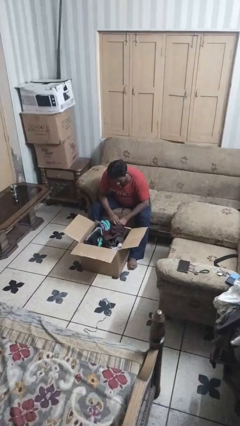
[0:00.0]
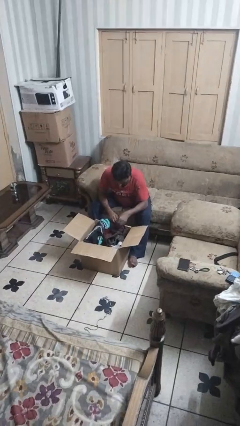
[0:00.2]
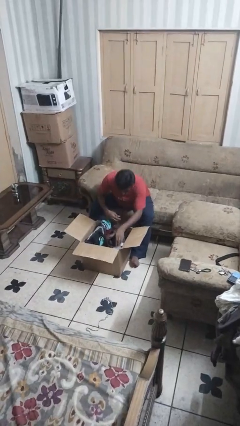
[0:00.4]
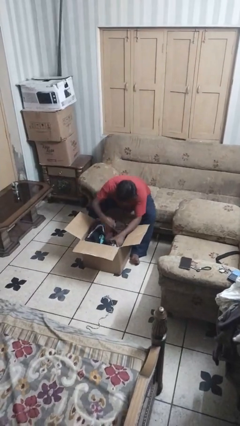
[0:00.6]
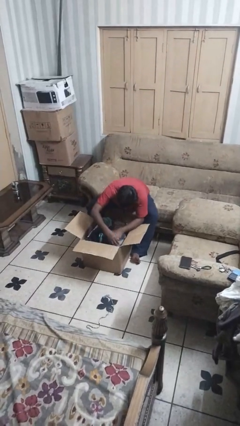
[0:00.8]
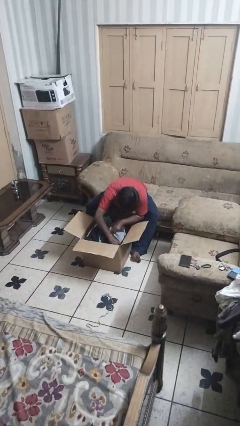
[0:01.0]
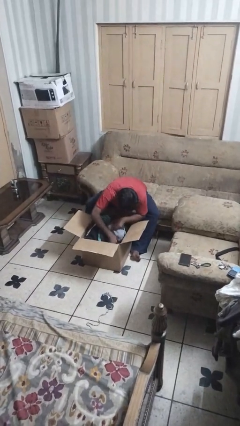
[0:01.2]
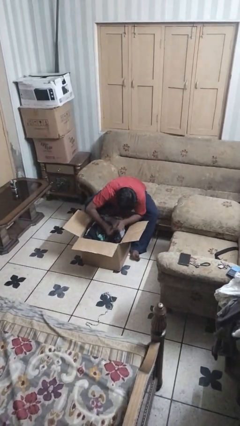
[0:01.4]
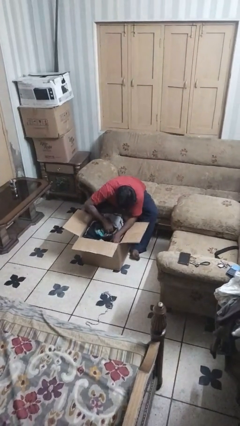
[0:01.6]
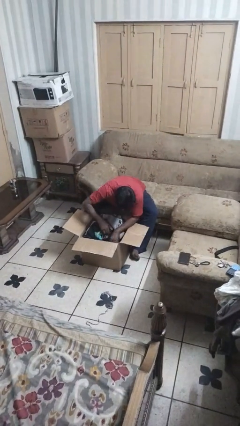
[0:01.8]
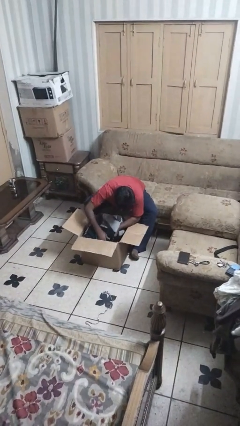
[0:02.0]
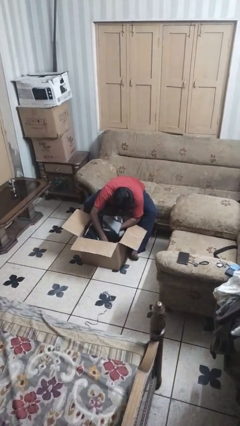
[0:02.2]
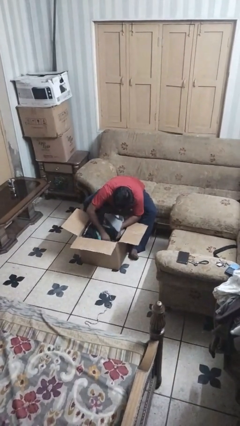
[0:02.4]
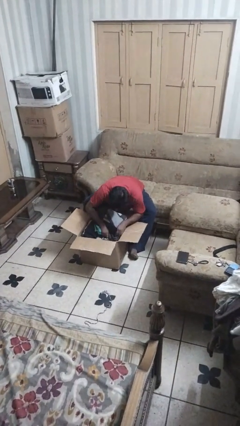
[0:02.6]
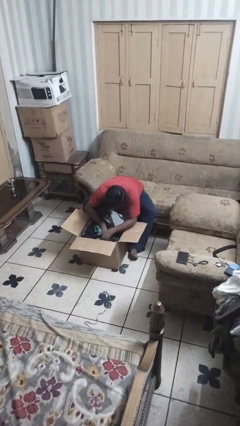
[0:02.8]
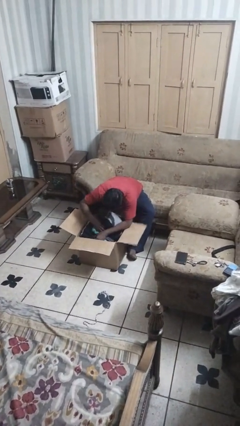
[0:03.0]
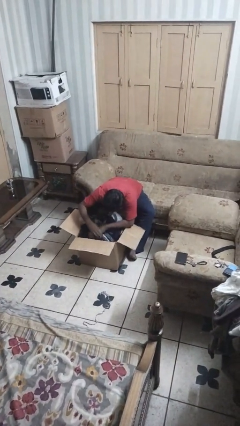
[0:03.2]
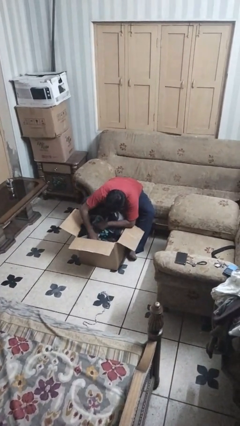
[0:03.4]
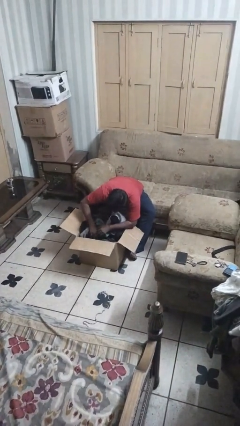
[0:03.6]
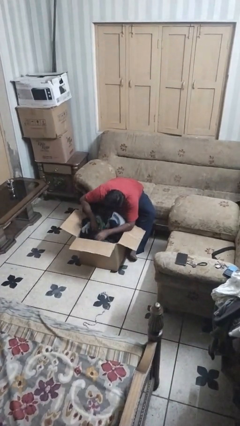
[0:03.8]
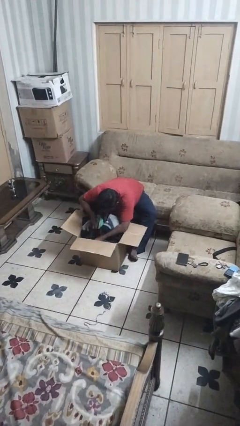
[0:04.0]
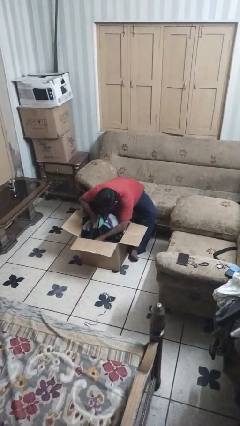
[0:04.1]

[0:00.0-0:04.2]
person searches in box

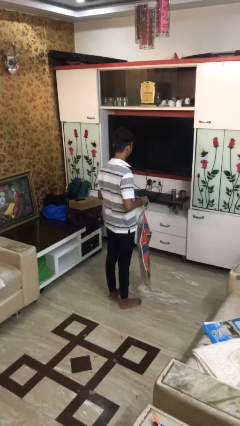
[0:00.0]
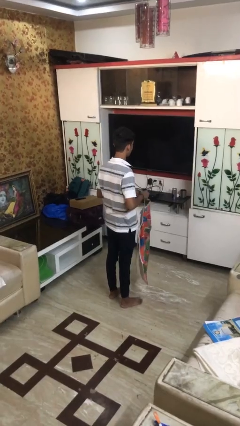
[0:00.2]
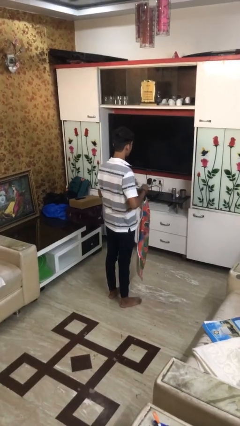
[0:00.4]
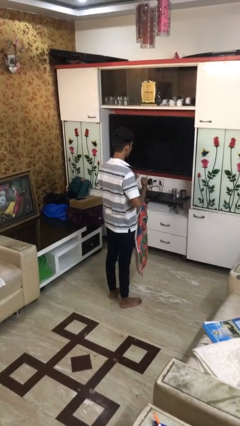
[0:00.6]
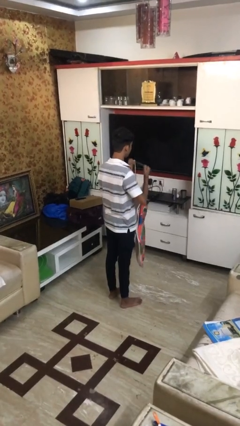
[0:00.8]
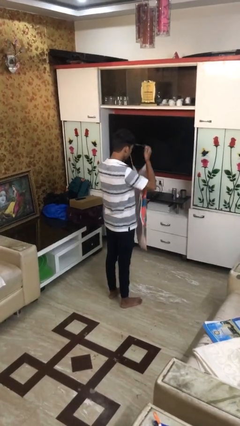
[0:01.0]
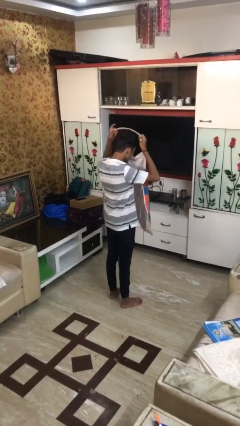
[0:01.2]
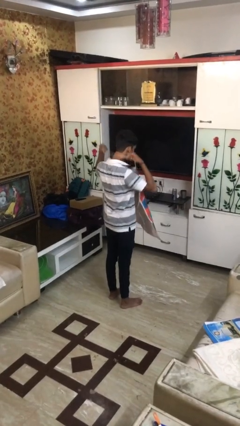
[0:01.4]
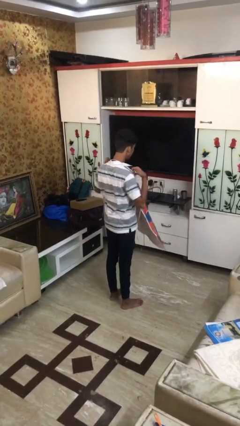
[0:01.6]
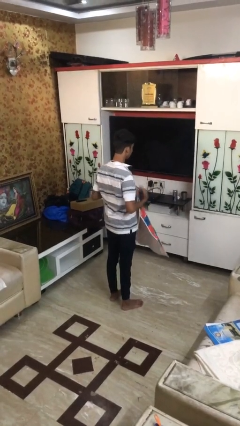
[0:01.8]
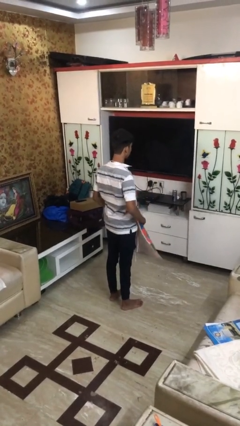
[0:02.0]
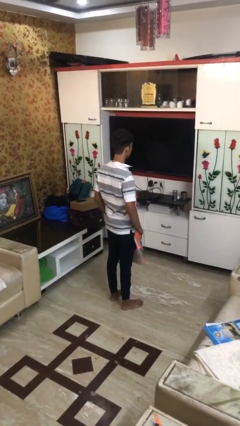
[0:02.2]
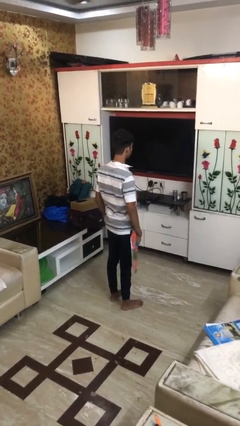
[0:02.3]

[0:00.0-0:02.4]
person puts on apron

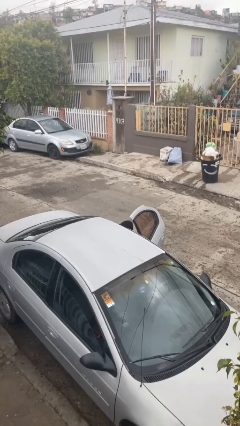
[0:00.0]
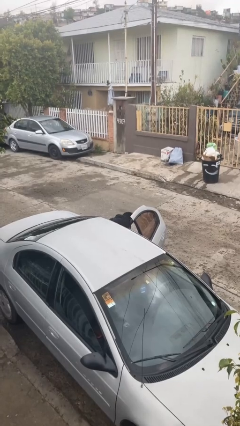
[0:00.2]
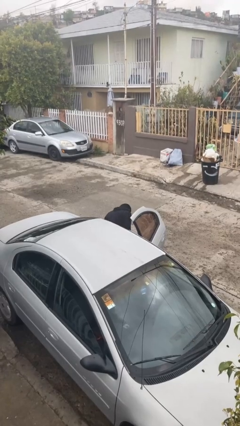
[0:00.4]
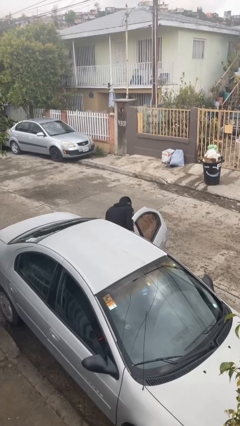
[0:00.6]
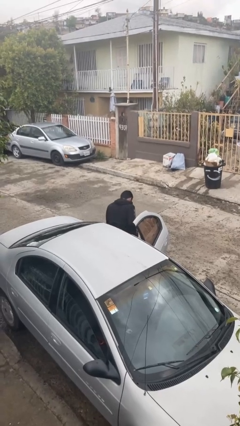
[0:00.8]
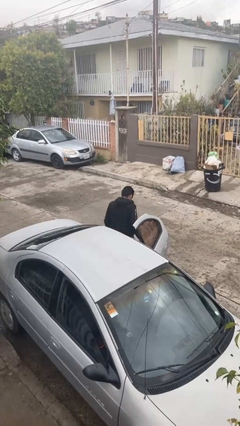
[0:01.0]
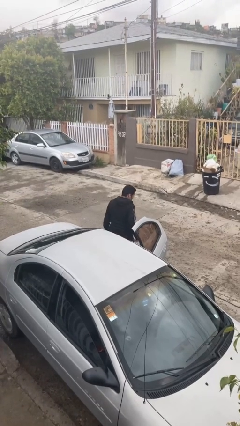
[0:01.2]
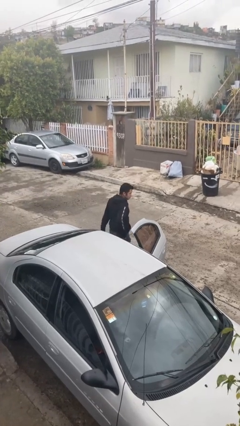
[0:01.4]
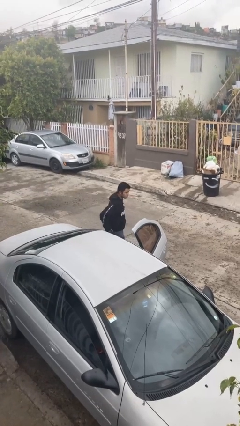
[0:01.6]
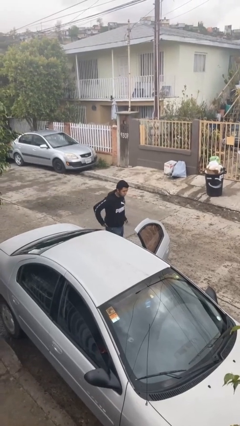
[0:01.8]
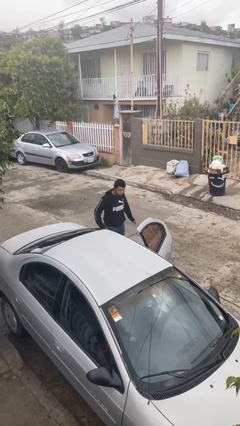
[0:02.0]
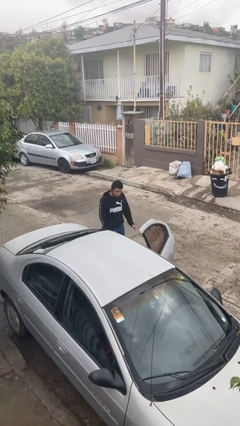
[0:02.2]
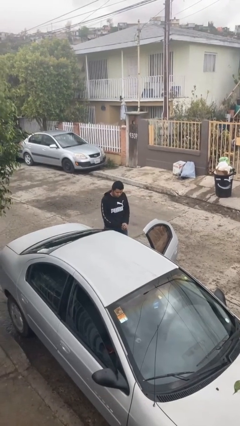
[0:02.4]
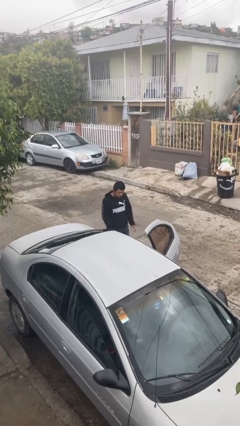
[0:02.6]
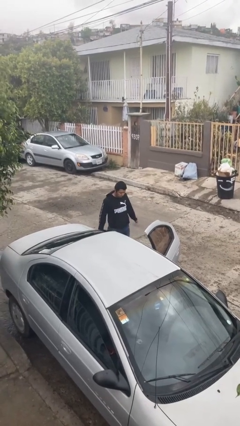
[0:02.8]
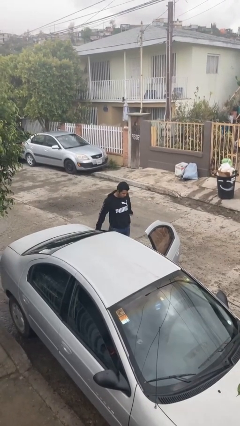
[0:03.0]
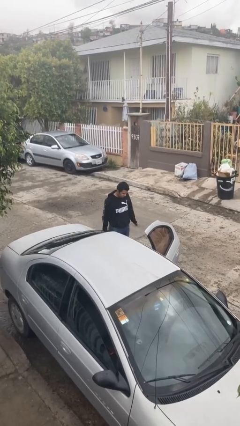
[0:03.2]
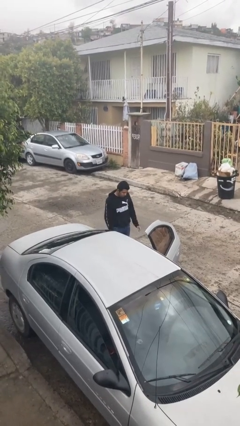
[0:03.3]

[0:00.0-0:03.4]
person exits car

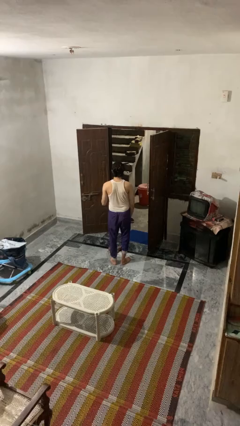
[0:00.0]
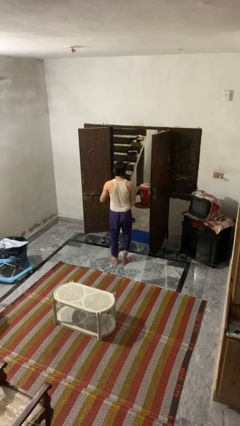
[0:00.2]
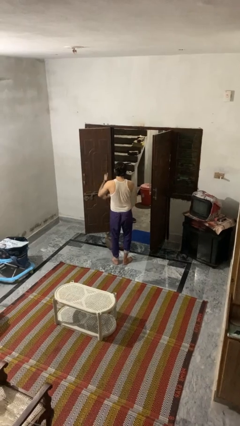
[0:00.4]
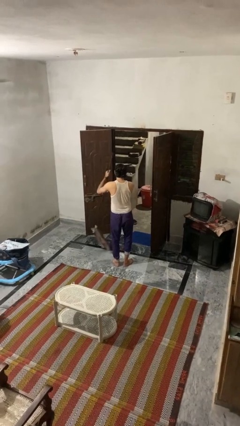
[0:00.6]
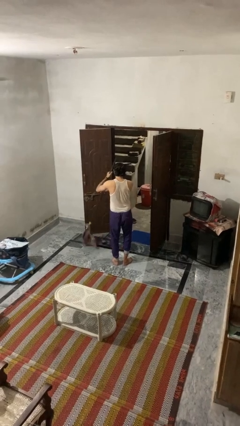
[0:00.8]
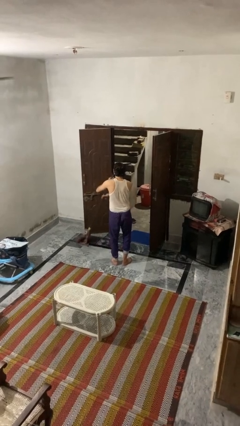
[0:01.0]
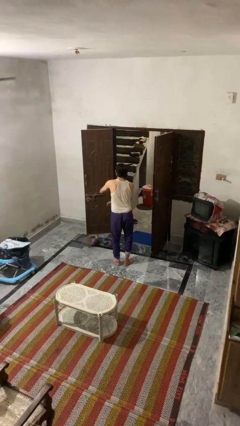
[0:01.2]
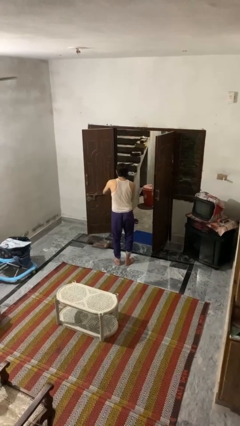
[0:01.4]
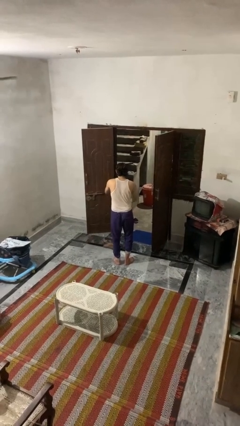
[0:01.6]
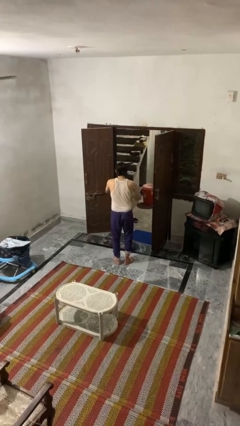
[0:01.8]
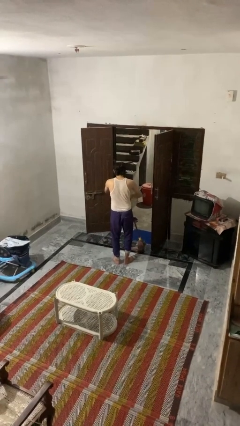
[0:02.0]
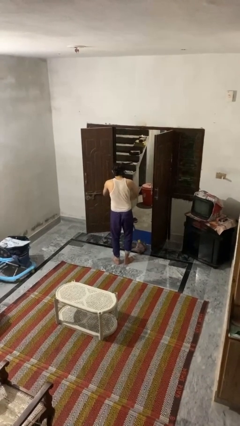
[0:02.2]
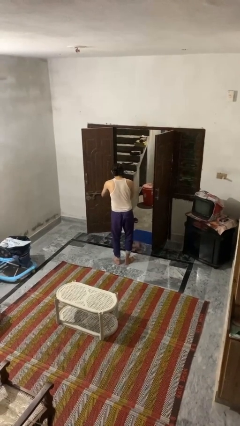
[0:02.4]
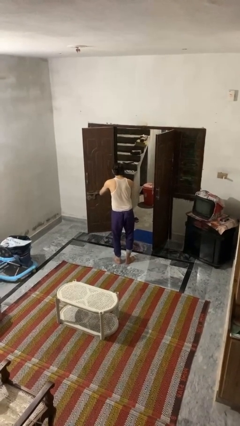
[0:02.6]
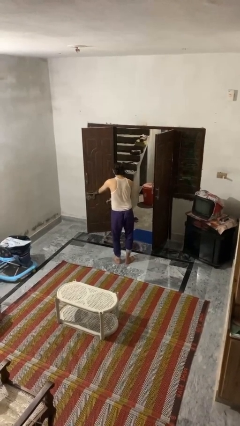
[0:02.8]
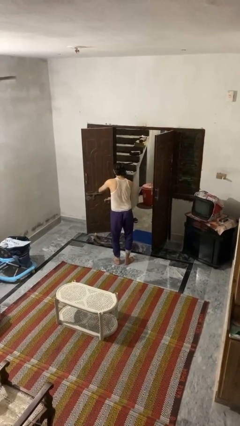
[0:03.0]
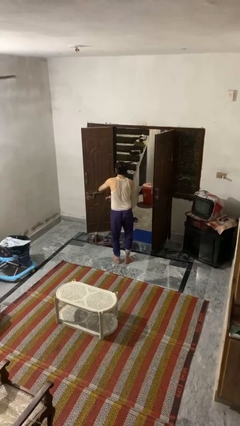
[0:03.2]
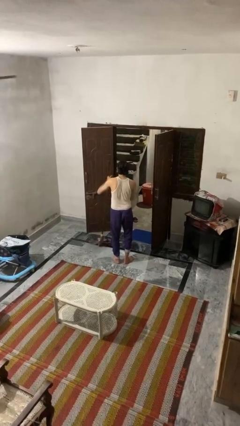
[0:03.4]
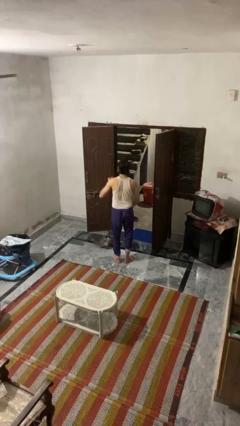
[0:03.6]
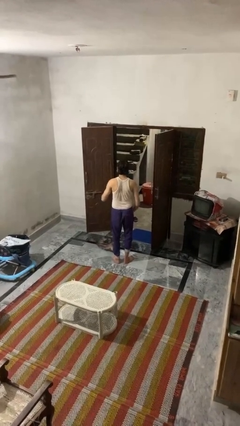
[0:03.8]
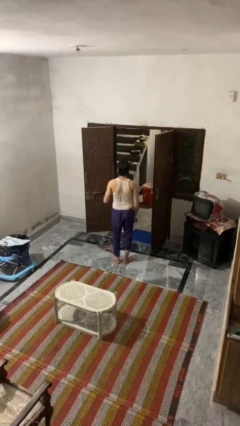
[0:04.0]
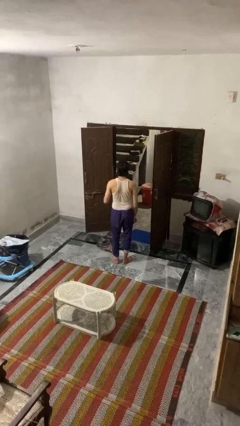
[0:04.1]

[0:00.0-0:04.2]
person mops

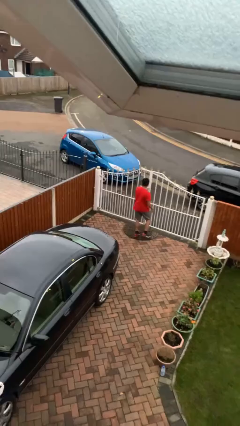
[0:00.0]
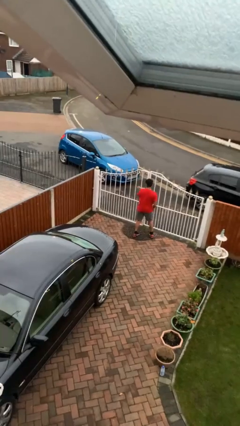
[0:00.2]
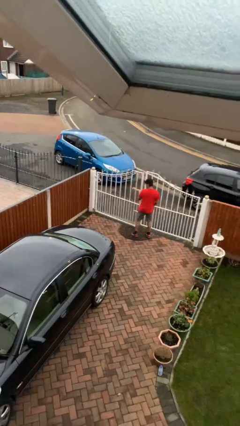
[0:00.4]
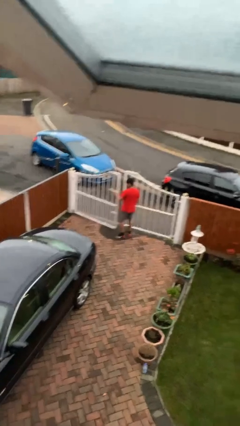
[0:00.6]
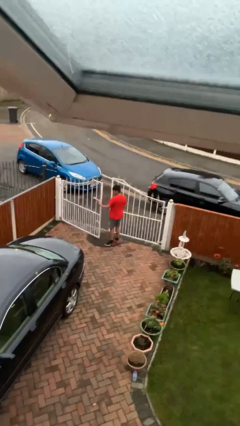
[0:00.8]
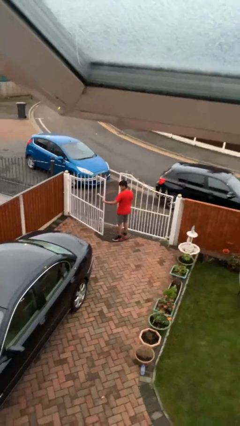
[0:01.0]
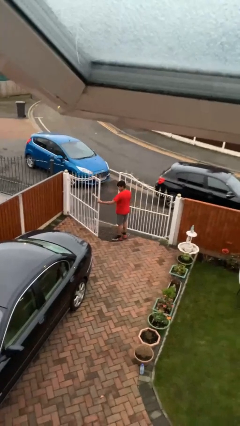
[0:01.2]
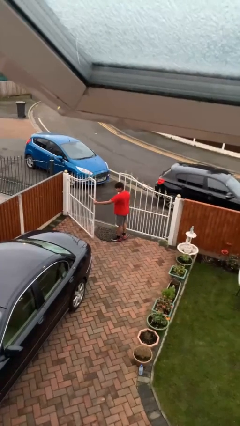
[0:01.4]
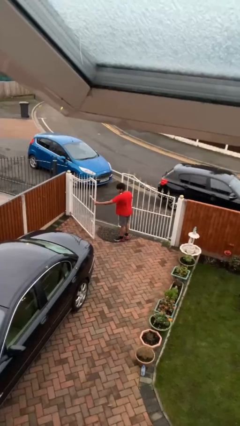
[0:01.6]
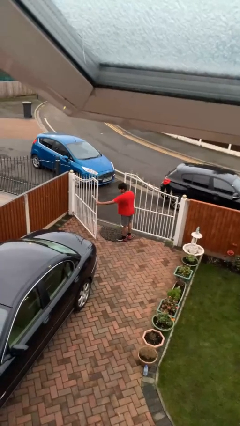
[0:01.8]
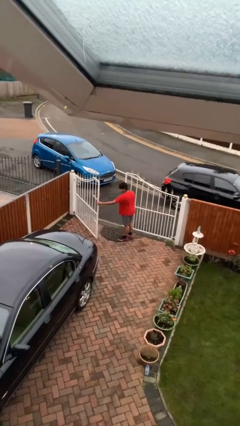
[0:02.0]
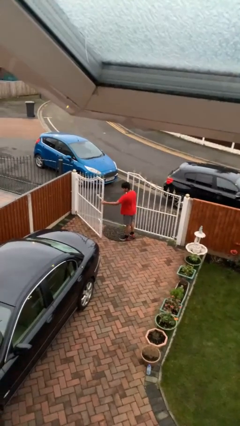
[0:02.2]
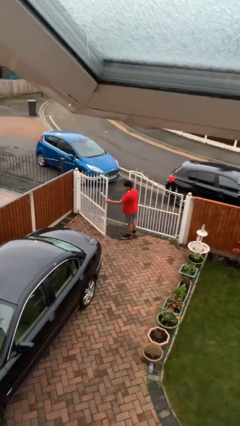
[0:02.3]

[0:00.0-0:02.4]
person opens facility door

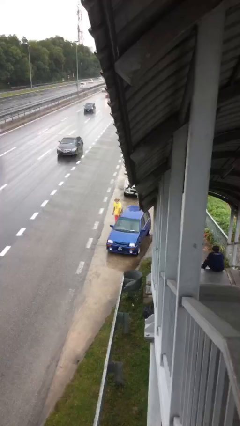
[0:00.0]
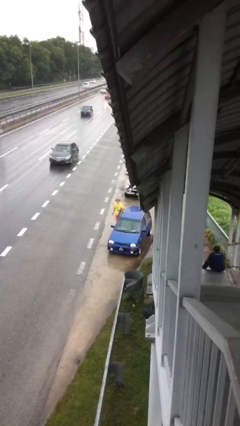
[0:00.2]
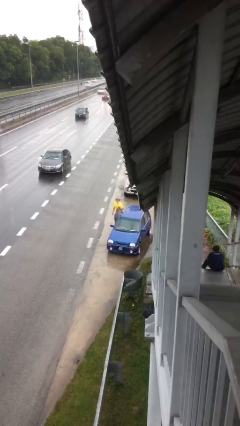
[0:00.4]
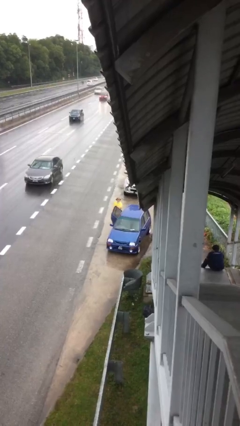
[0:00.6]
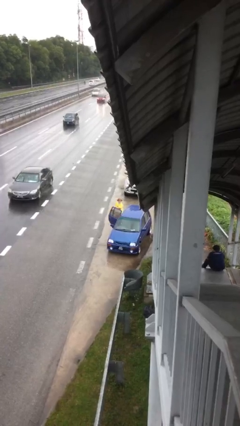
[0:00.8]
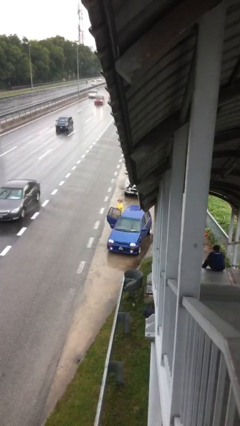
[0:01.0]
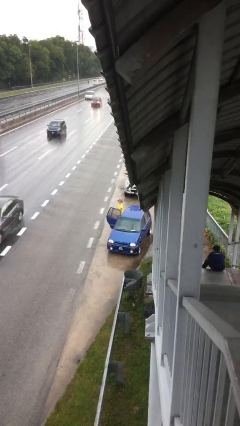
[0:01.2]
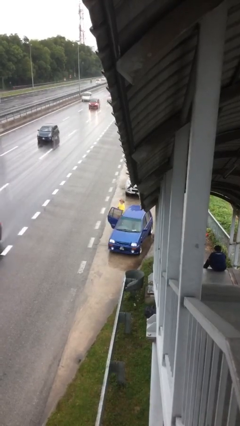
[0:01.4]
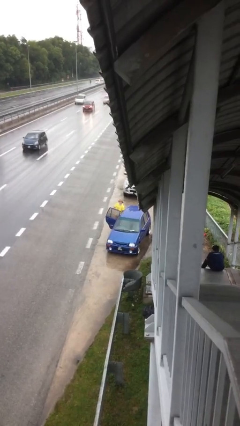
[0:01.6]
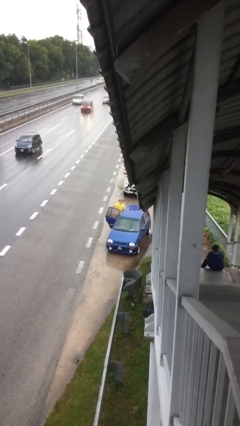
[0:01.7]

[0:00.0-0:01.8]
person opens car door
